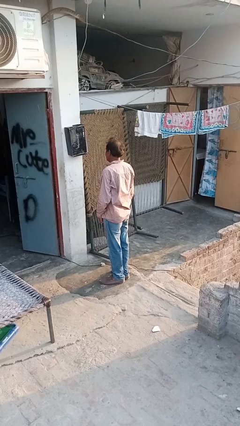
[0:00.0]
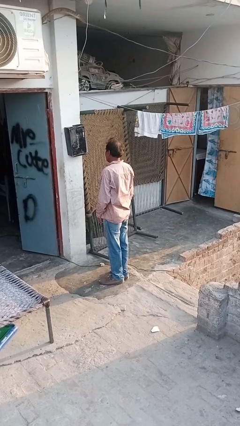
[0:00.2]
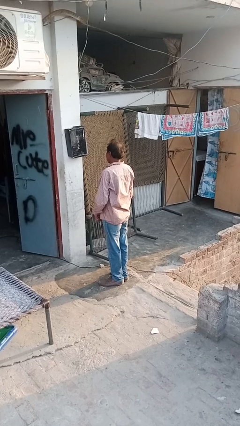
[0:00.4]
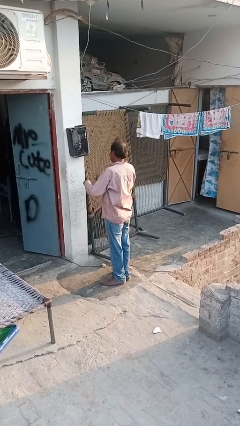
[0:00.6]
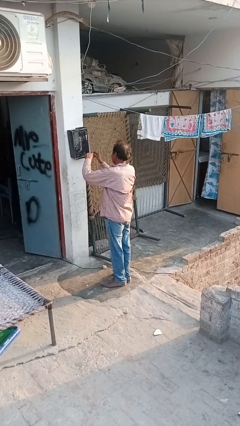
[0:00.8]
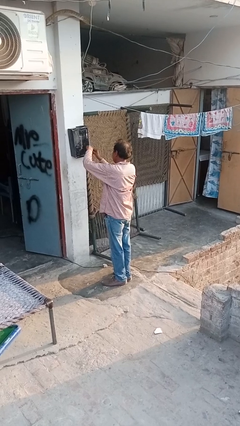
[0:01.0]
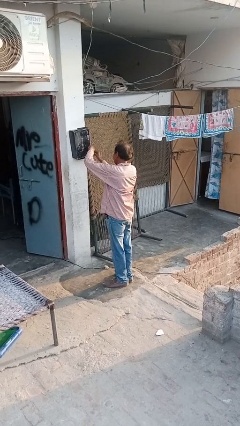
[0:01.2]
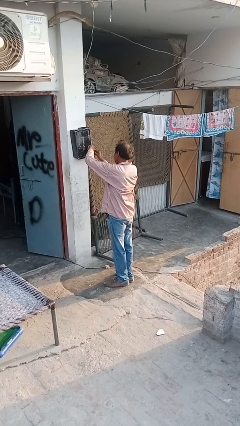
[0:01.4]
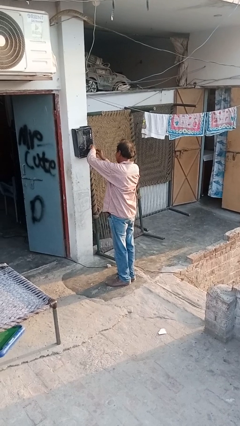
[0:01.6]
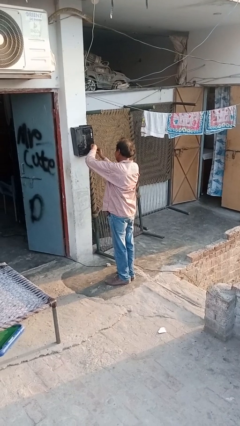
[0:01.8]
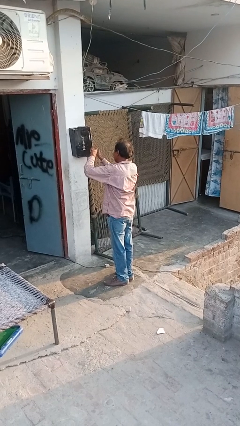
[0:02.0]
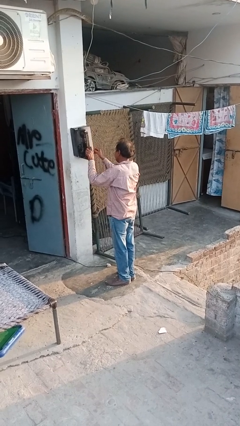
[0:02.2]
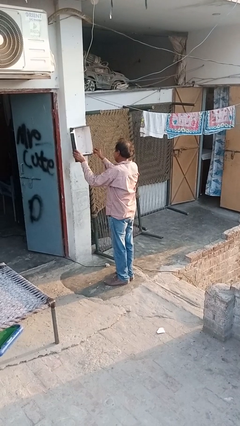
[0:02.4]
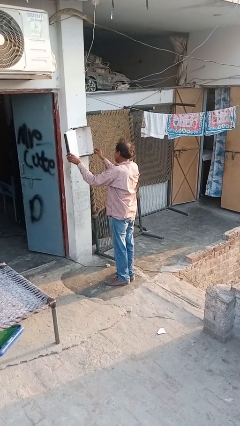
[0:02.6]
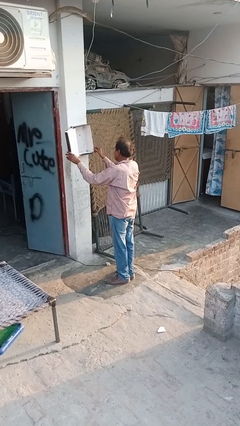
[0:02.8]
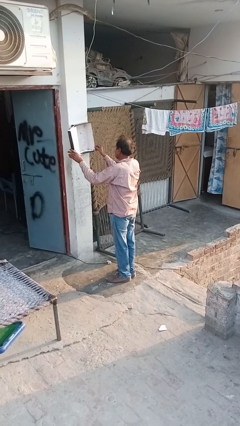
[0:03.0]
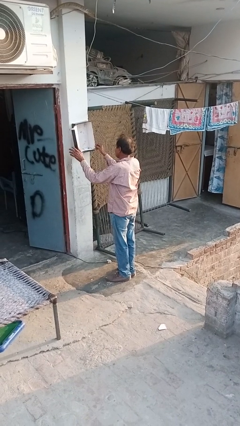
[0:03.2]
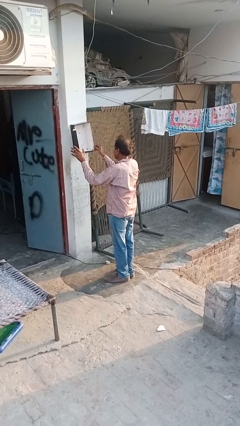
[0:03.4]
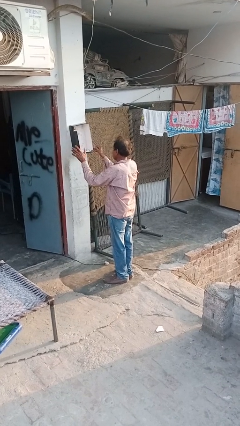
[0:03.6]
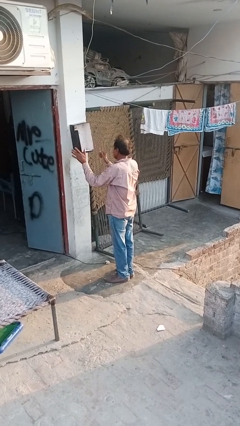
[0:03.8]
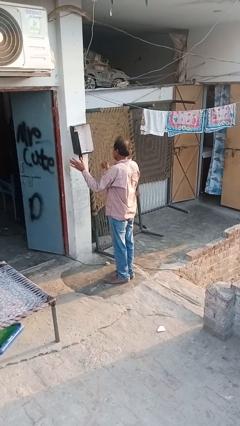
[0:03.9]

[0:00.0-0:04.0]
person opens mailbox

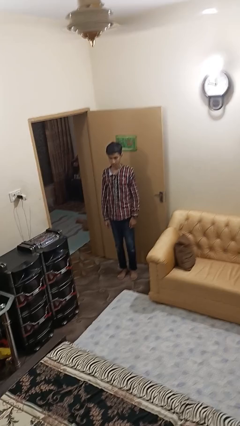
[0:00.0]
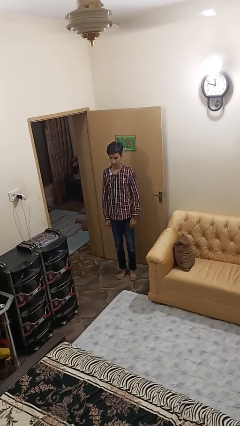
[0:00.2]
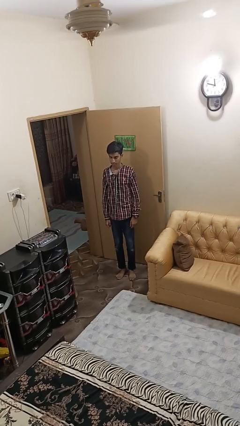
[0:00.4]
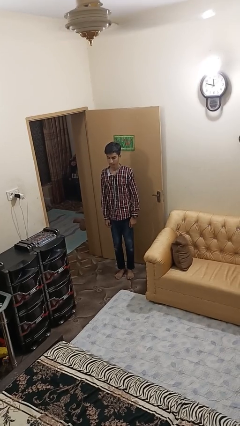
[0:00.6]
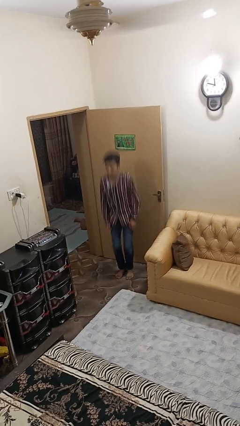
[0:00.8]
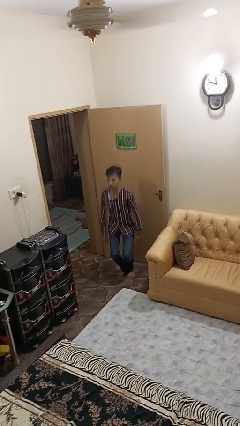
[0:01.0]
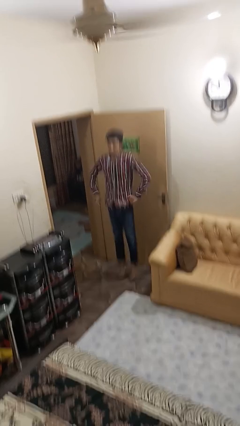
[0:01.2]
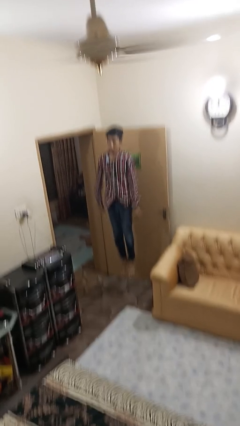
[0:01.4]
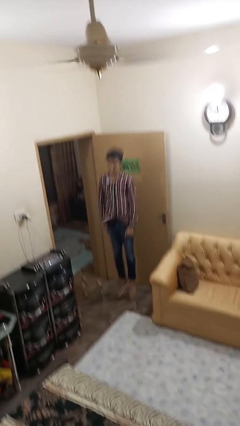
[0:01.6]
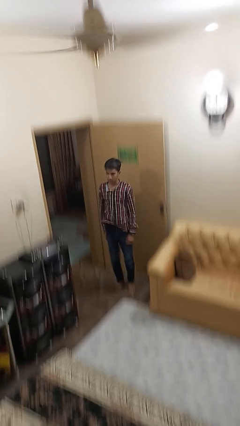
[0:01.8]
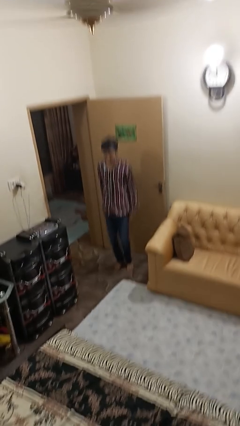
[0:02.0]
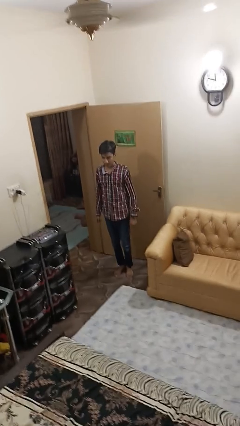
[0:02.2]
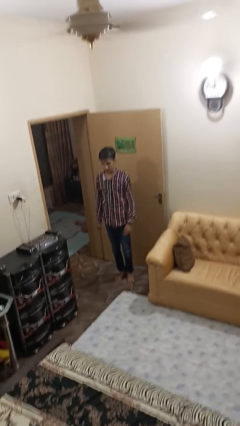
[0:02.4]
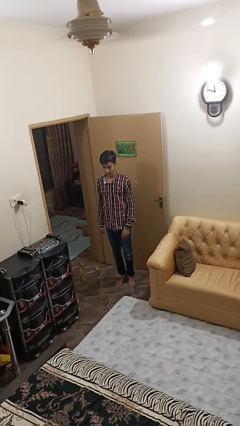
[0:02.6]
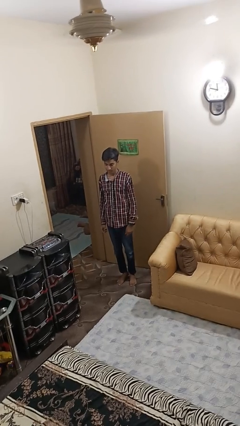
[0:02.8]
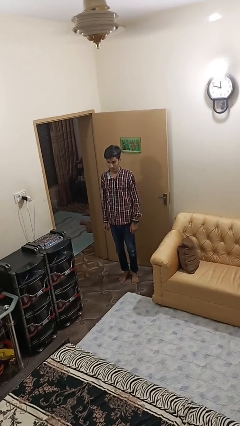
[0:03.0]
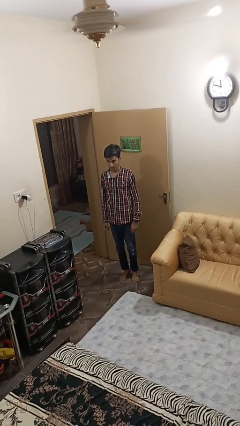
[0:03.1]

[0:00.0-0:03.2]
person jumps

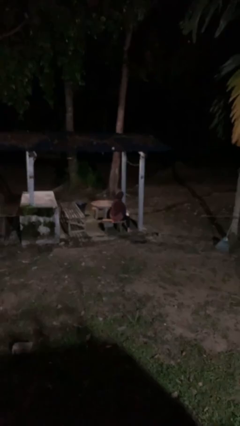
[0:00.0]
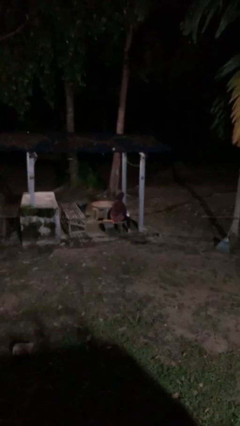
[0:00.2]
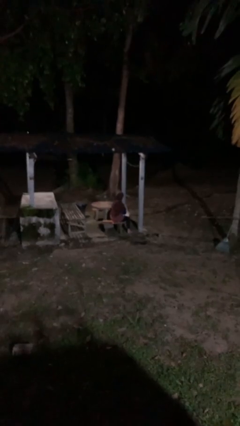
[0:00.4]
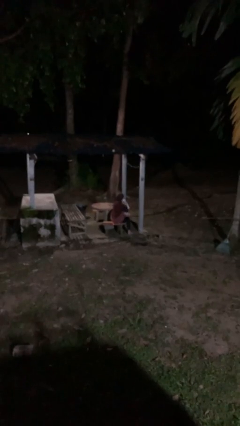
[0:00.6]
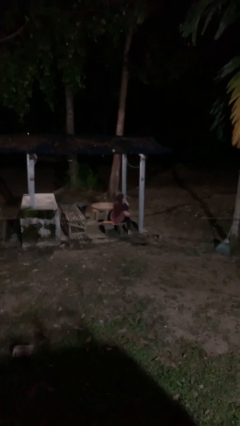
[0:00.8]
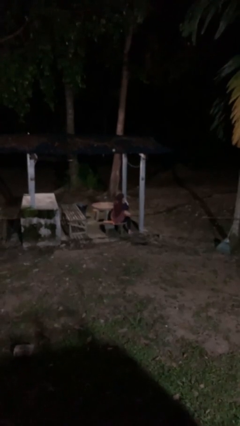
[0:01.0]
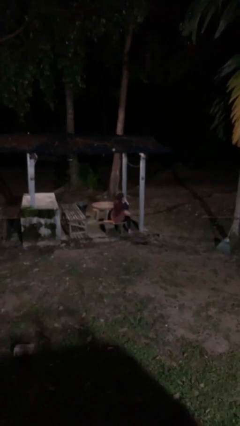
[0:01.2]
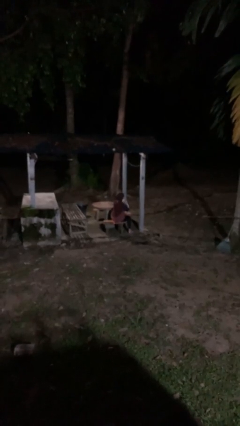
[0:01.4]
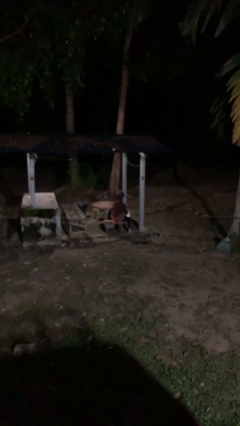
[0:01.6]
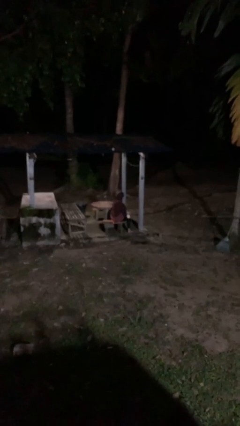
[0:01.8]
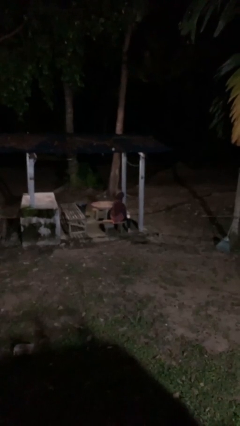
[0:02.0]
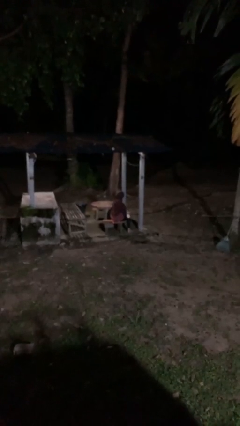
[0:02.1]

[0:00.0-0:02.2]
person blows nose

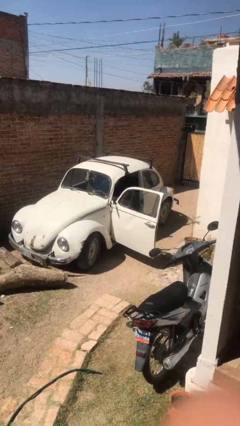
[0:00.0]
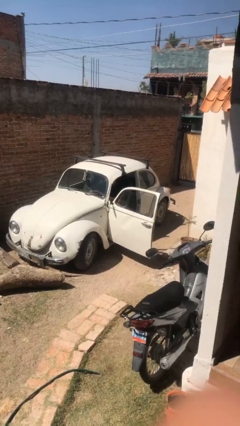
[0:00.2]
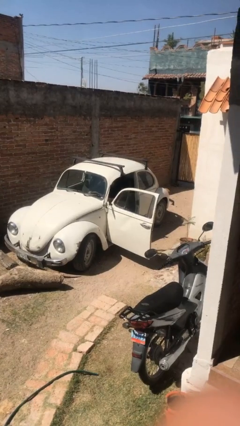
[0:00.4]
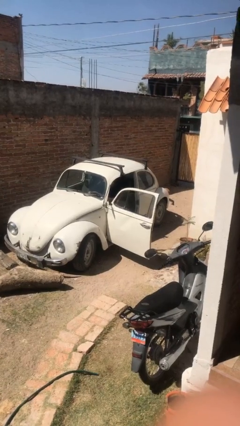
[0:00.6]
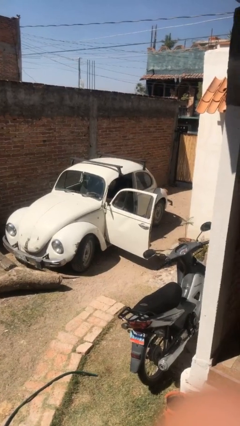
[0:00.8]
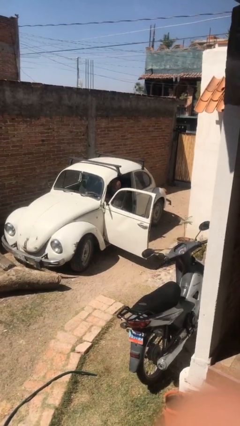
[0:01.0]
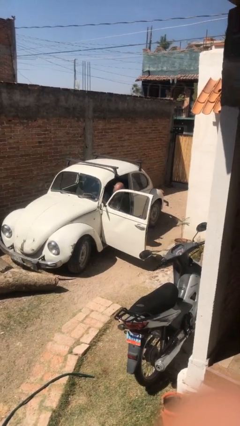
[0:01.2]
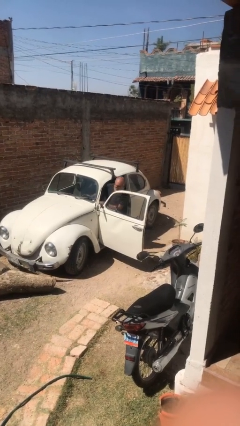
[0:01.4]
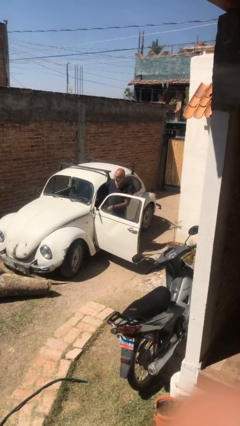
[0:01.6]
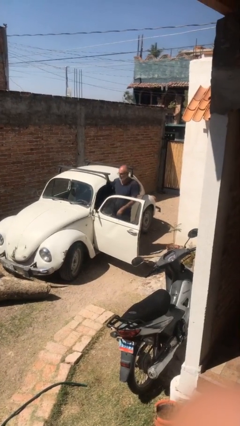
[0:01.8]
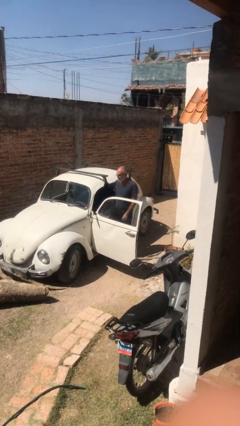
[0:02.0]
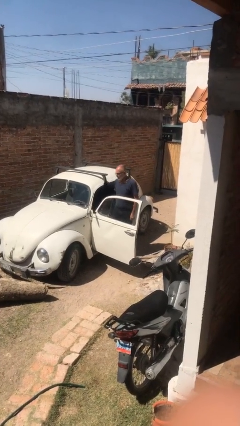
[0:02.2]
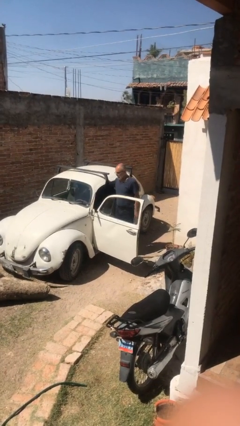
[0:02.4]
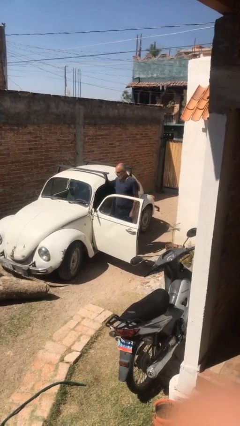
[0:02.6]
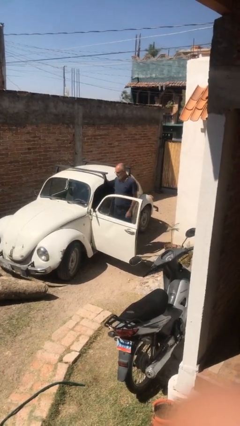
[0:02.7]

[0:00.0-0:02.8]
person exits car

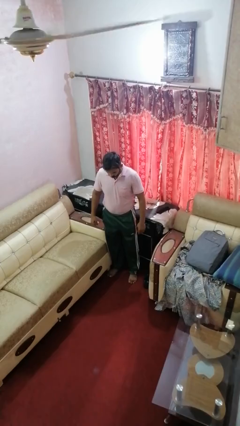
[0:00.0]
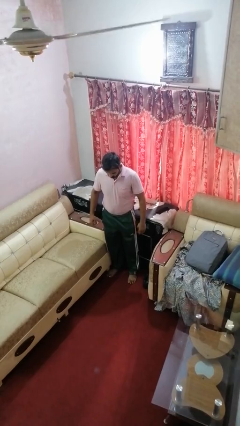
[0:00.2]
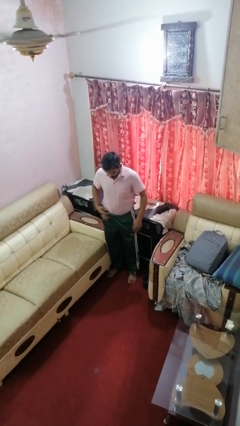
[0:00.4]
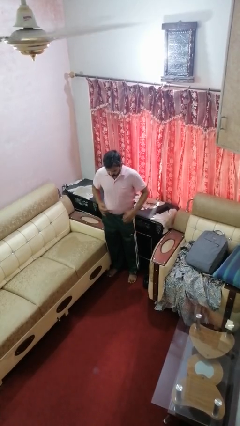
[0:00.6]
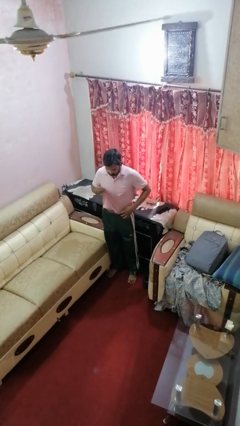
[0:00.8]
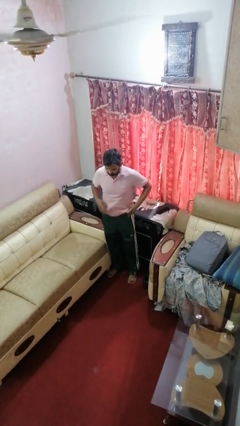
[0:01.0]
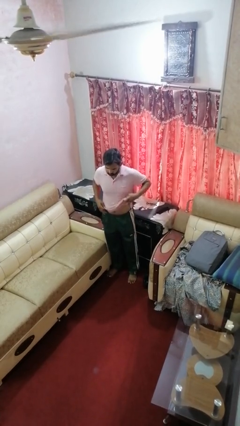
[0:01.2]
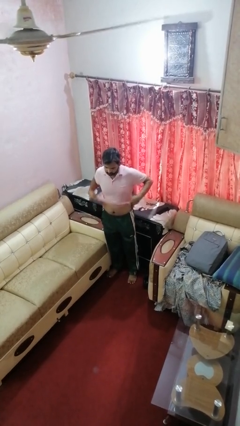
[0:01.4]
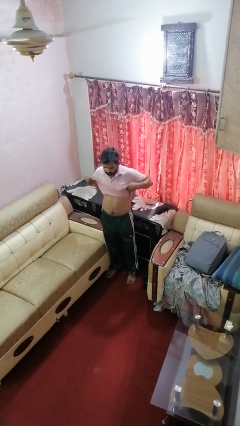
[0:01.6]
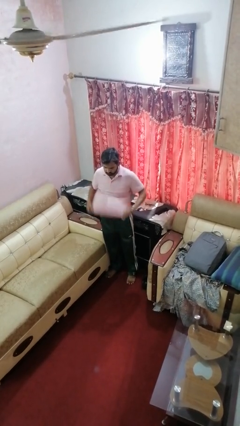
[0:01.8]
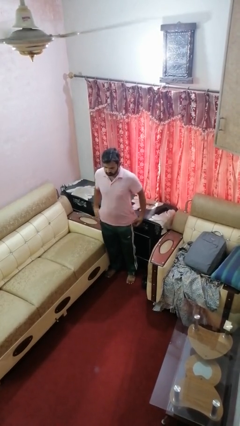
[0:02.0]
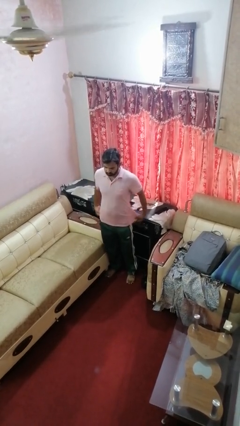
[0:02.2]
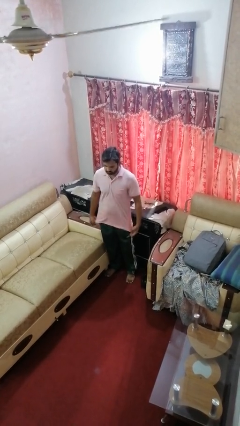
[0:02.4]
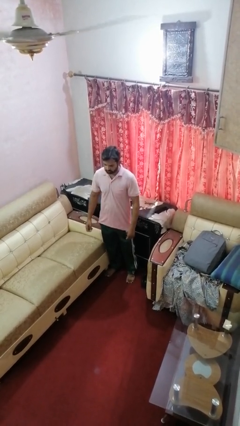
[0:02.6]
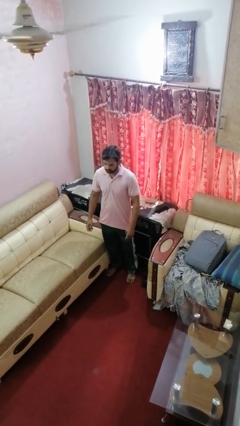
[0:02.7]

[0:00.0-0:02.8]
person untucks shirt

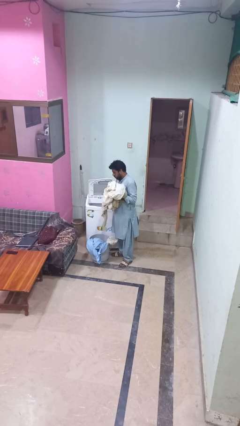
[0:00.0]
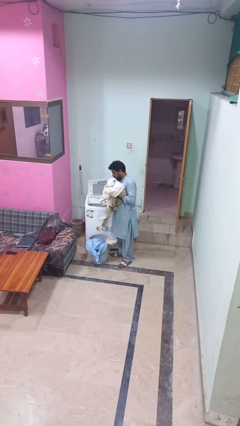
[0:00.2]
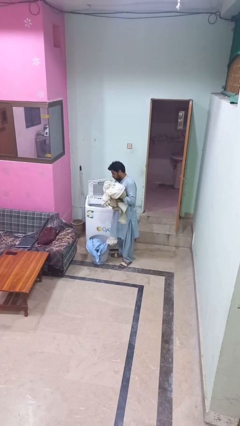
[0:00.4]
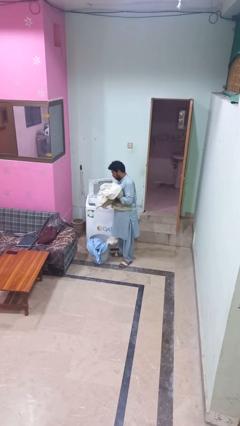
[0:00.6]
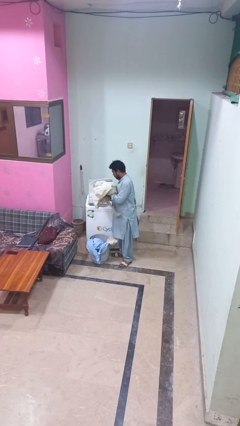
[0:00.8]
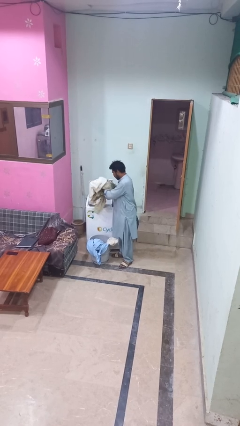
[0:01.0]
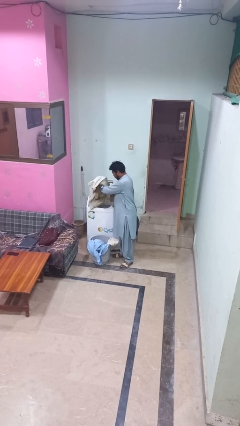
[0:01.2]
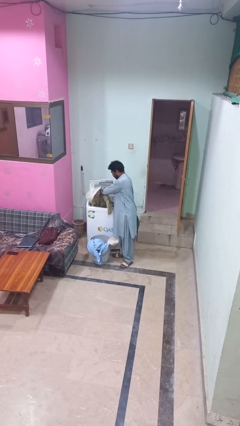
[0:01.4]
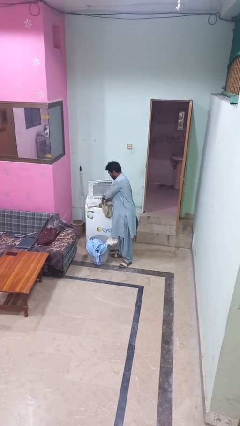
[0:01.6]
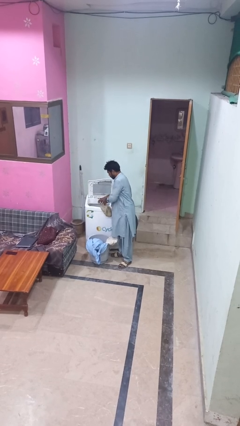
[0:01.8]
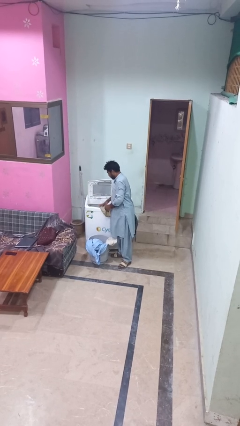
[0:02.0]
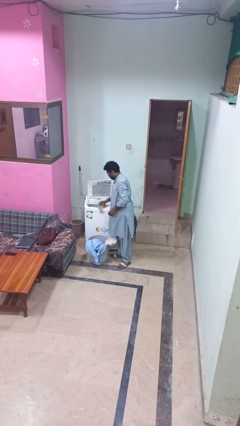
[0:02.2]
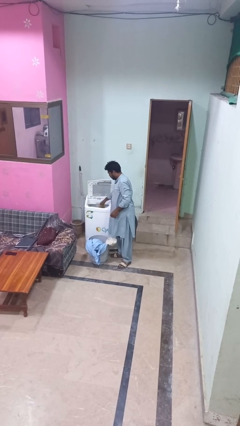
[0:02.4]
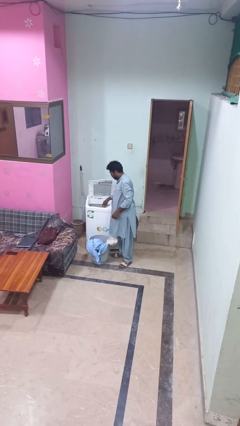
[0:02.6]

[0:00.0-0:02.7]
person loads clotheswasher
